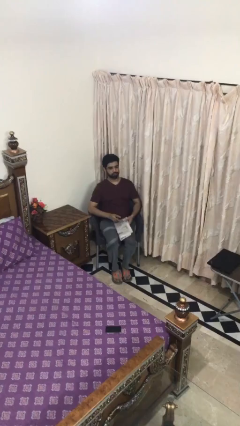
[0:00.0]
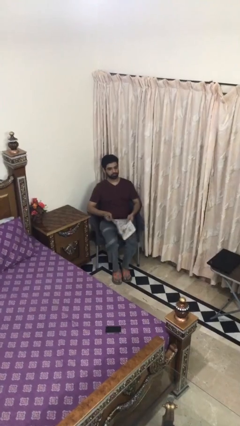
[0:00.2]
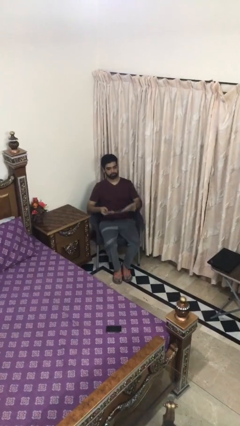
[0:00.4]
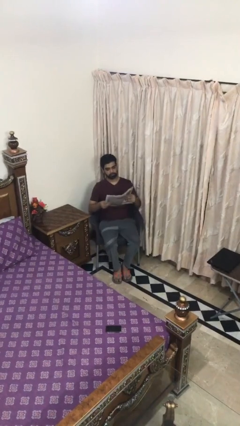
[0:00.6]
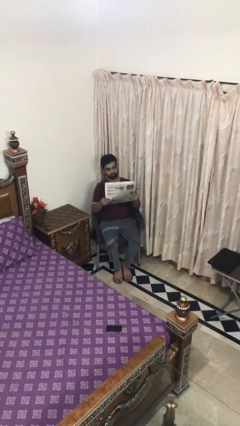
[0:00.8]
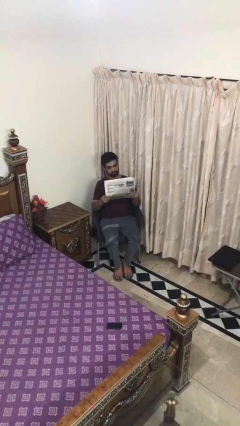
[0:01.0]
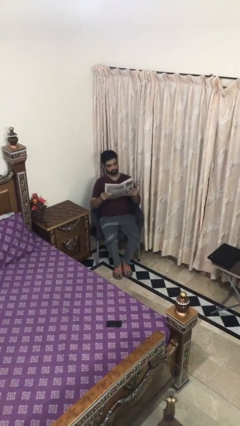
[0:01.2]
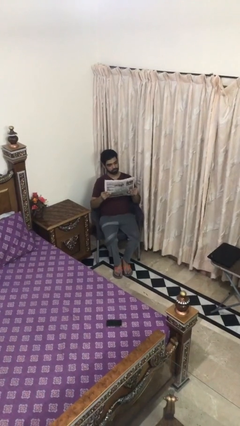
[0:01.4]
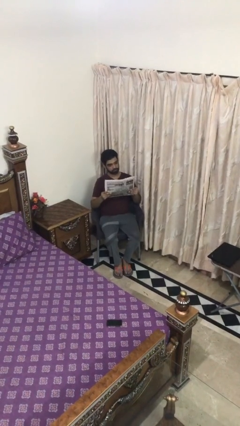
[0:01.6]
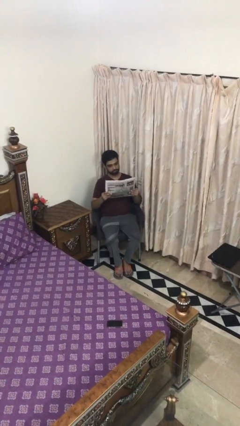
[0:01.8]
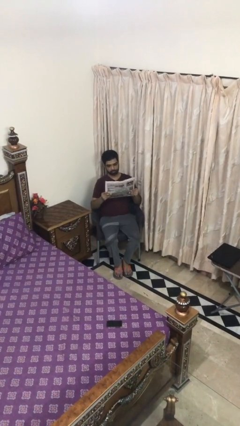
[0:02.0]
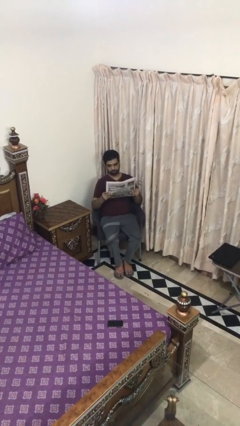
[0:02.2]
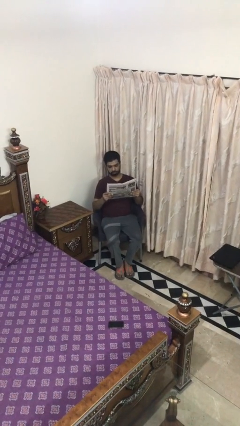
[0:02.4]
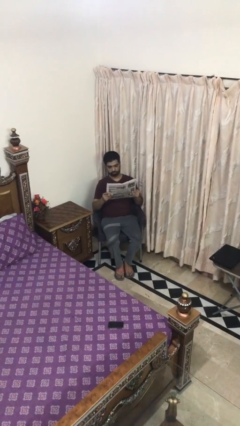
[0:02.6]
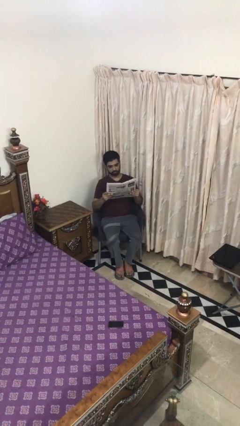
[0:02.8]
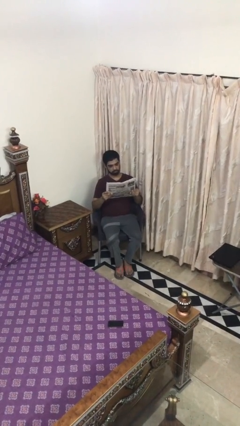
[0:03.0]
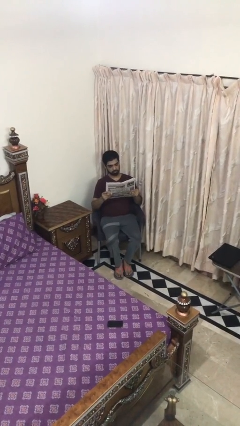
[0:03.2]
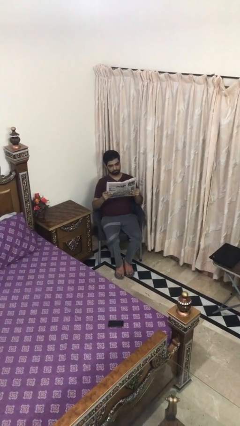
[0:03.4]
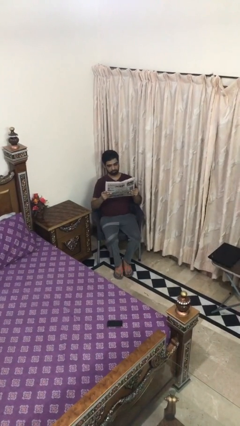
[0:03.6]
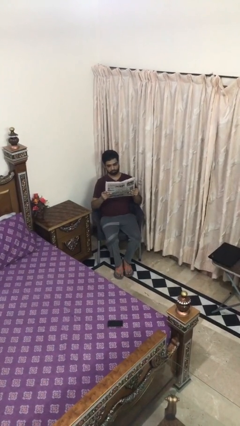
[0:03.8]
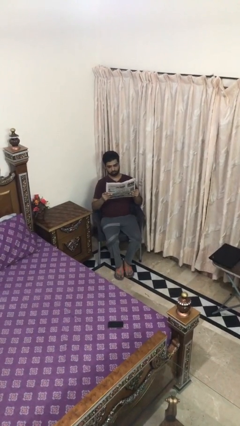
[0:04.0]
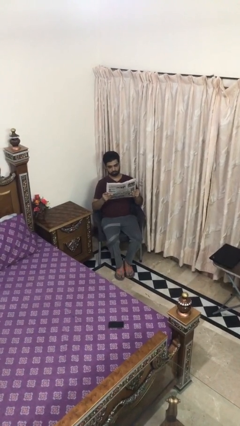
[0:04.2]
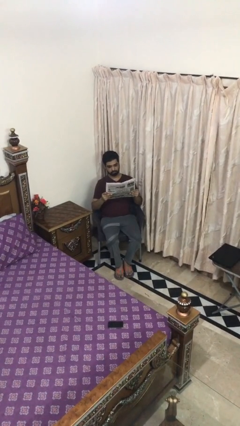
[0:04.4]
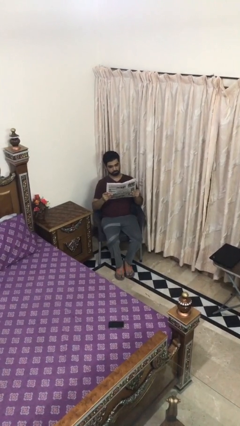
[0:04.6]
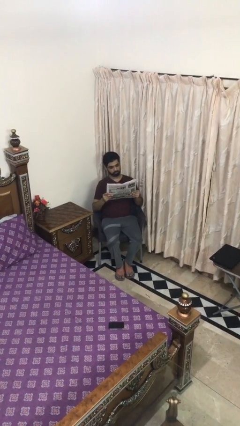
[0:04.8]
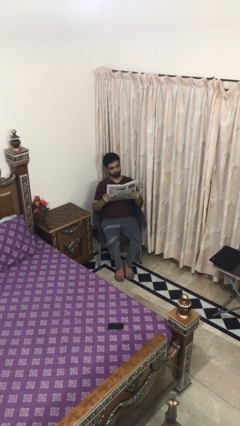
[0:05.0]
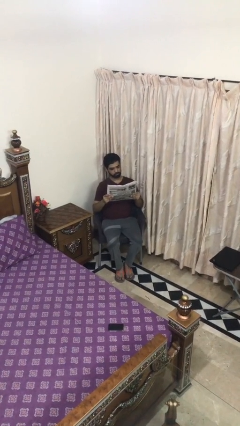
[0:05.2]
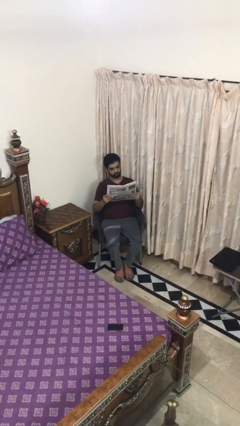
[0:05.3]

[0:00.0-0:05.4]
person reads document

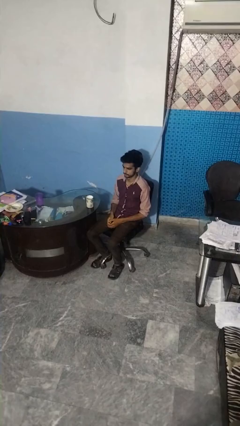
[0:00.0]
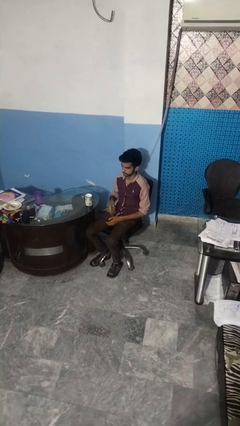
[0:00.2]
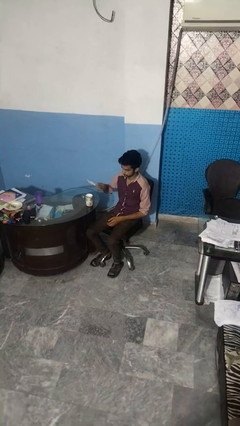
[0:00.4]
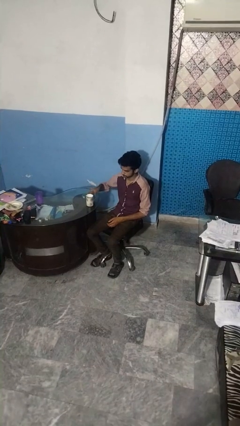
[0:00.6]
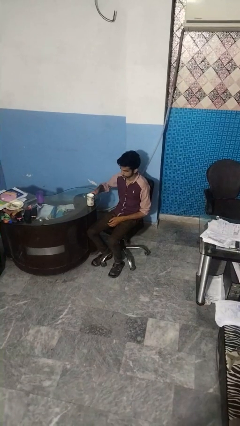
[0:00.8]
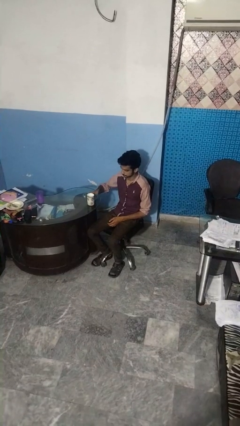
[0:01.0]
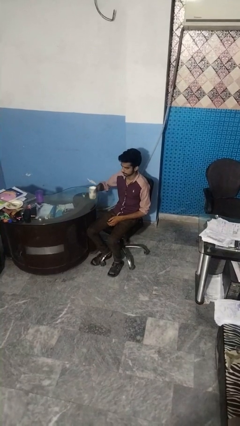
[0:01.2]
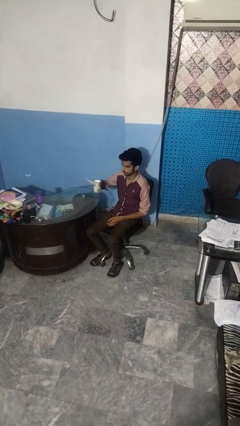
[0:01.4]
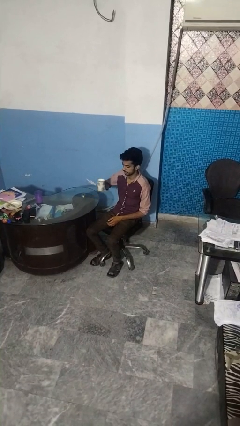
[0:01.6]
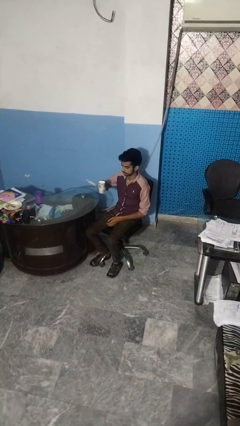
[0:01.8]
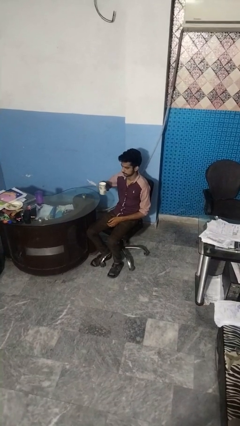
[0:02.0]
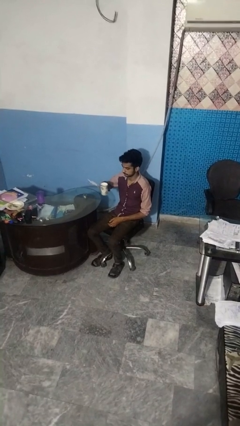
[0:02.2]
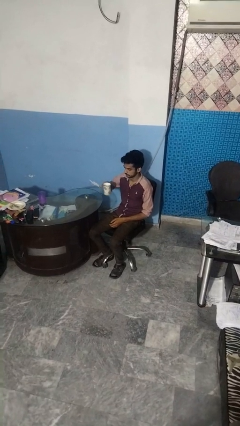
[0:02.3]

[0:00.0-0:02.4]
person picks up object from table

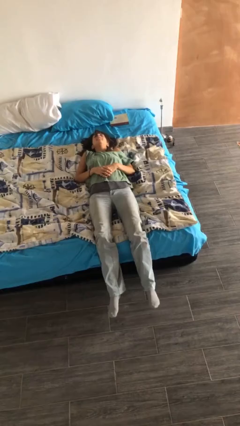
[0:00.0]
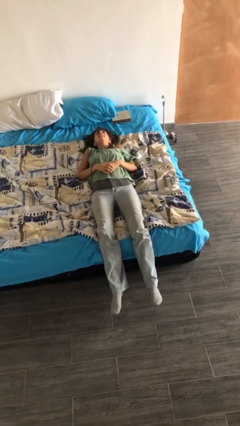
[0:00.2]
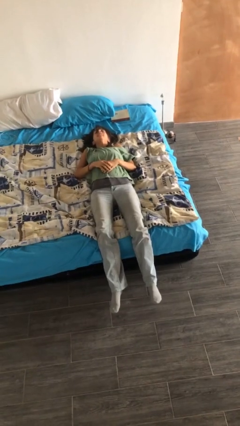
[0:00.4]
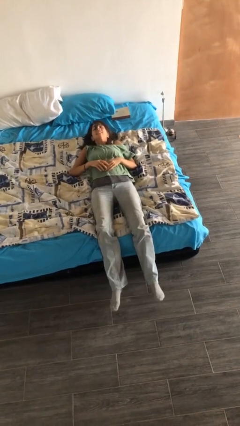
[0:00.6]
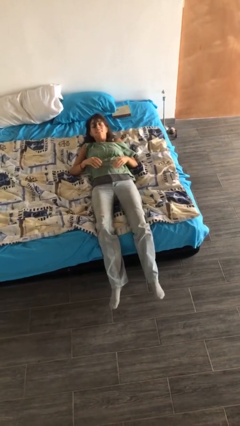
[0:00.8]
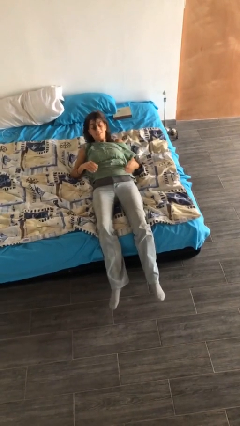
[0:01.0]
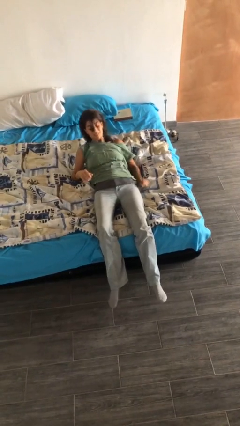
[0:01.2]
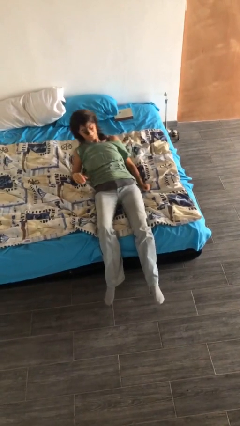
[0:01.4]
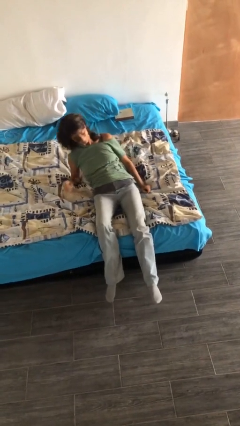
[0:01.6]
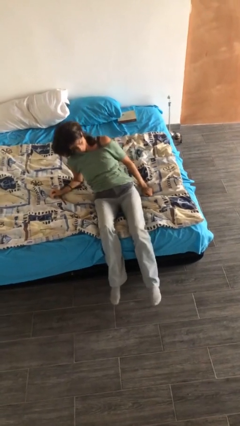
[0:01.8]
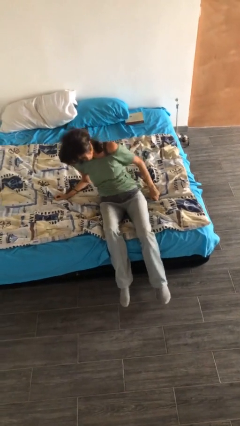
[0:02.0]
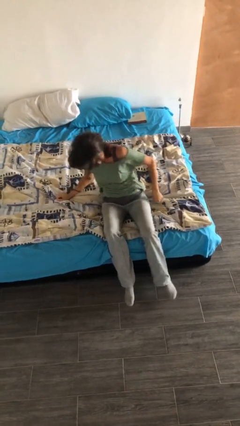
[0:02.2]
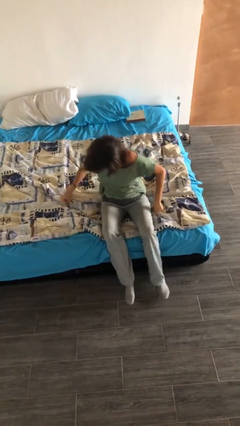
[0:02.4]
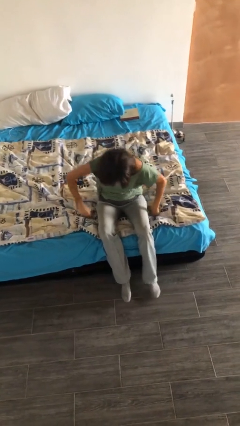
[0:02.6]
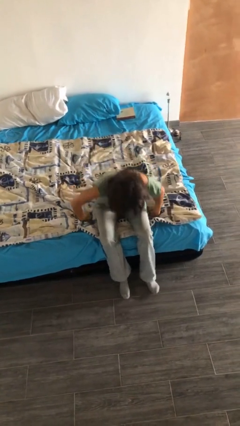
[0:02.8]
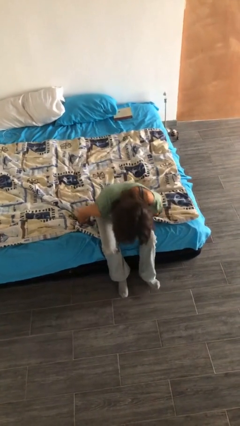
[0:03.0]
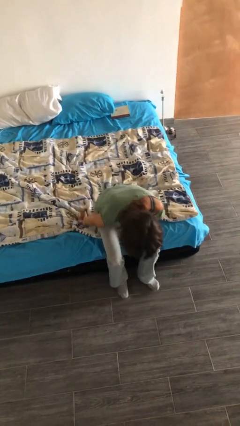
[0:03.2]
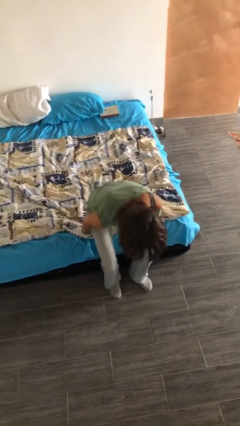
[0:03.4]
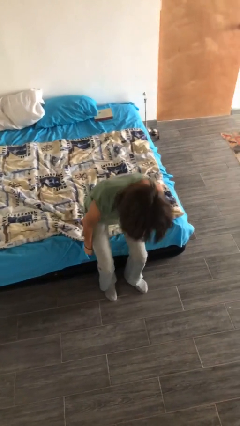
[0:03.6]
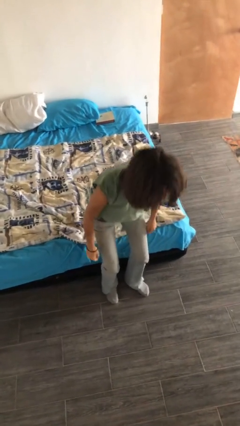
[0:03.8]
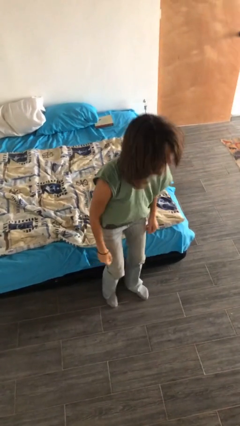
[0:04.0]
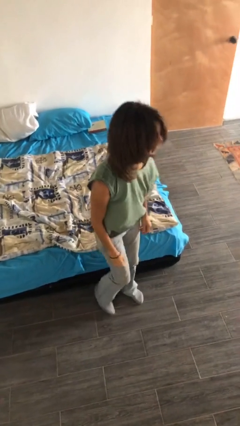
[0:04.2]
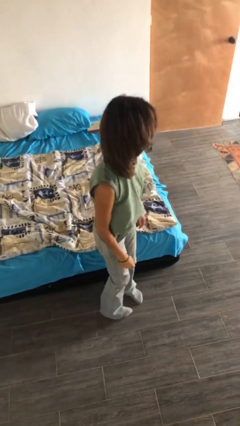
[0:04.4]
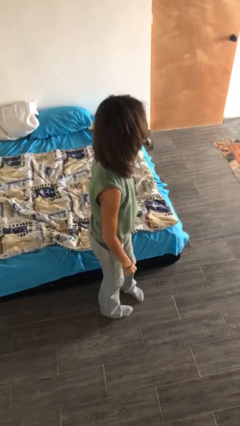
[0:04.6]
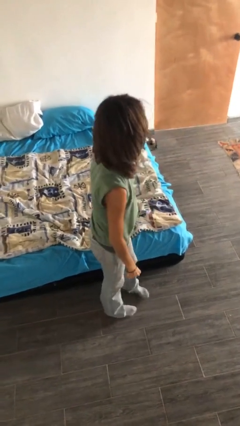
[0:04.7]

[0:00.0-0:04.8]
person stands up

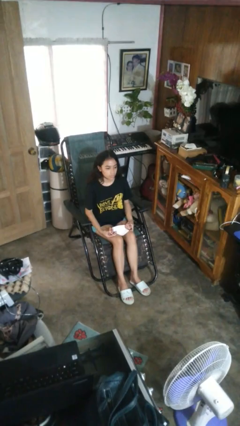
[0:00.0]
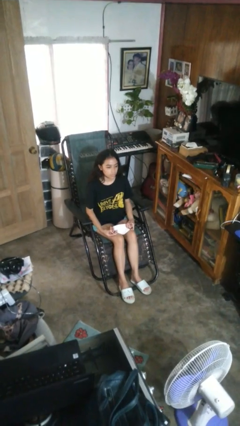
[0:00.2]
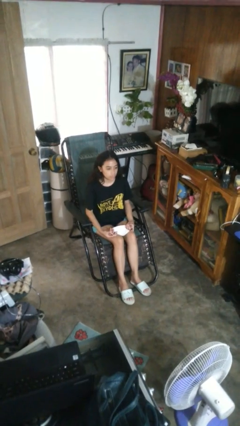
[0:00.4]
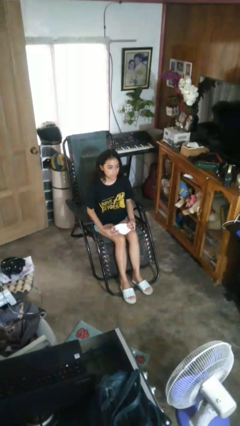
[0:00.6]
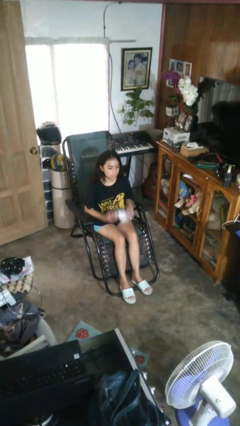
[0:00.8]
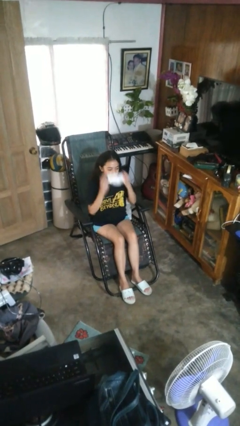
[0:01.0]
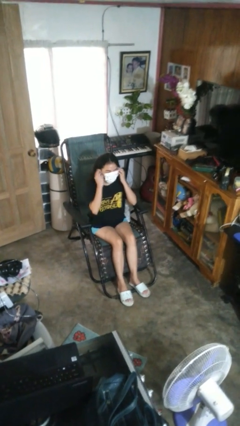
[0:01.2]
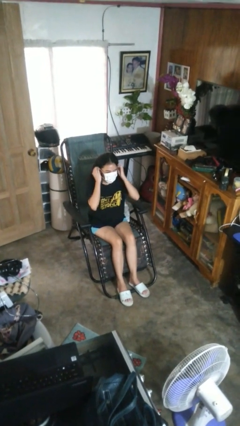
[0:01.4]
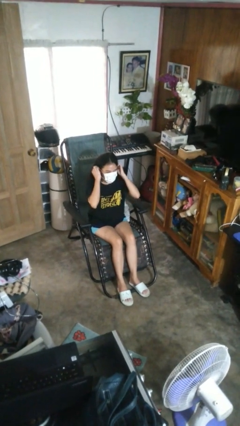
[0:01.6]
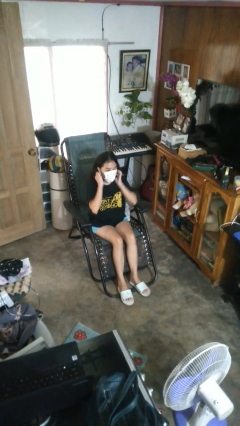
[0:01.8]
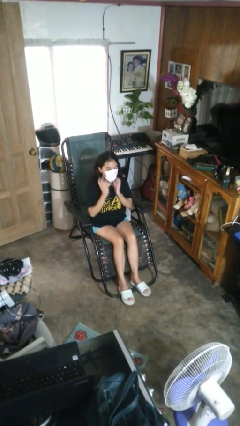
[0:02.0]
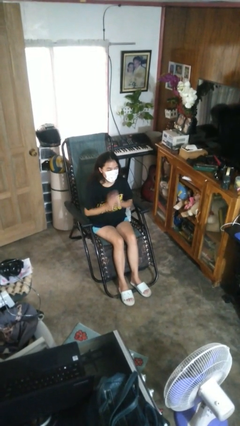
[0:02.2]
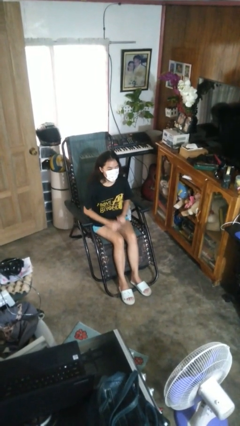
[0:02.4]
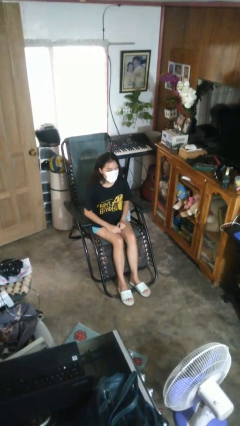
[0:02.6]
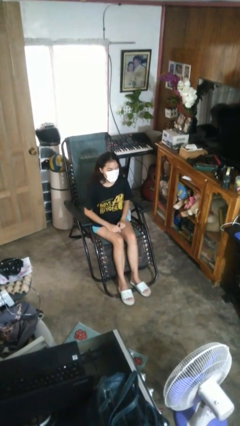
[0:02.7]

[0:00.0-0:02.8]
person puts on facemask

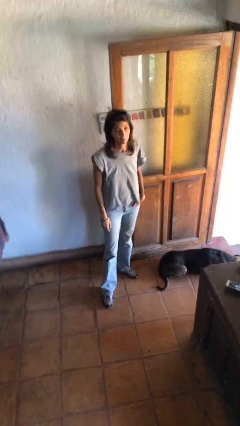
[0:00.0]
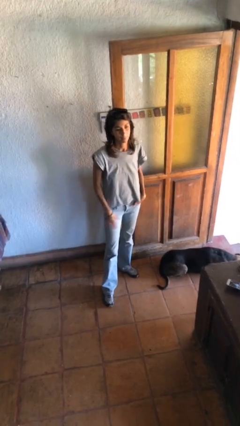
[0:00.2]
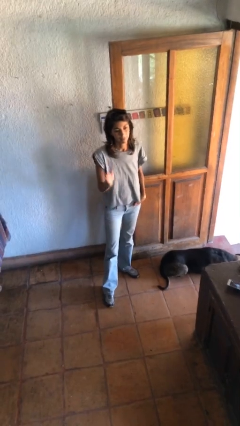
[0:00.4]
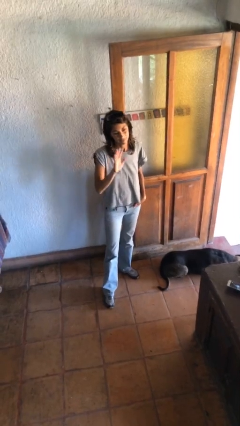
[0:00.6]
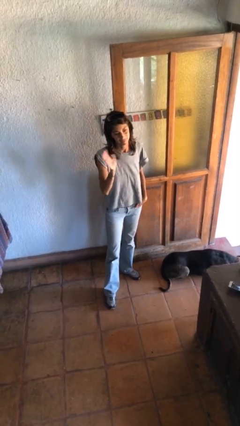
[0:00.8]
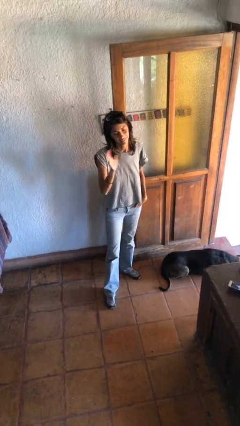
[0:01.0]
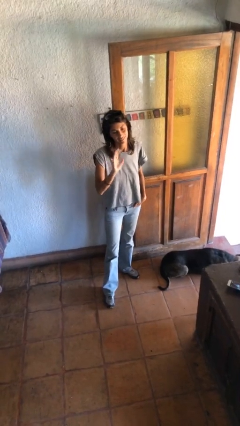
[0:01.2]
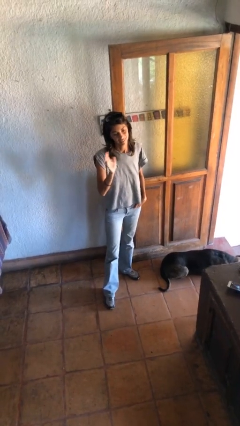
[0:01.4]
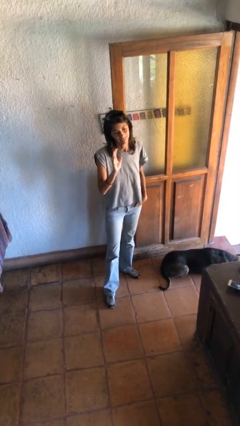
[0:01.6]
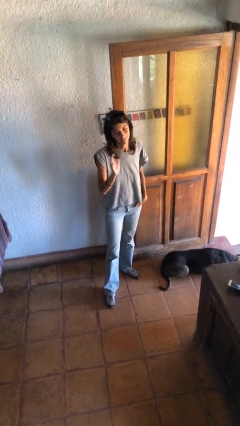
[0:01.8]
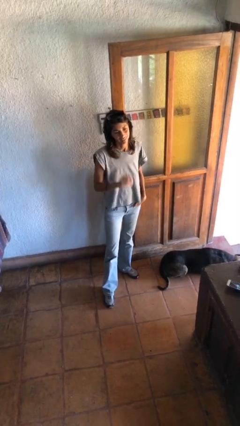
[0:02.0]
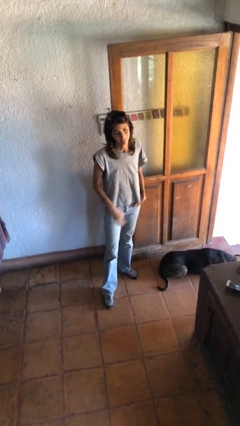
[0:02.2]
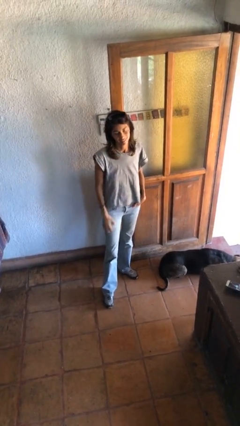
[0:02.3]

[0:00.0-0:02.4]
person waves at person

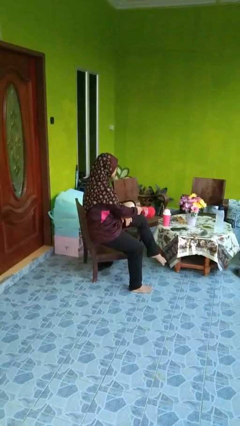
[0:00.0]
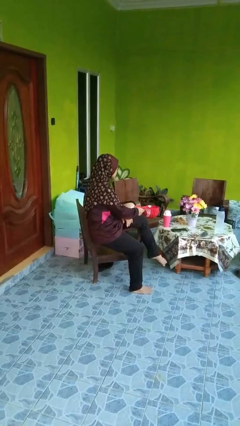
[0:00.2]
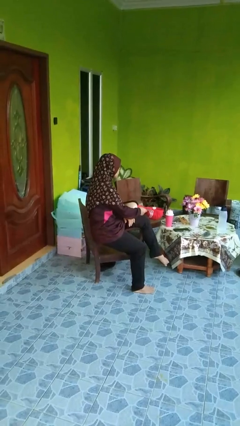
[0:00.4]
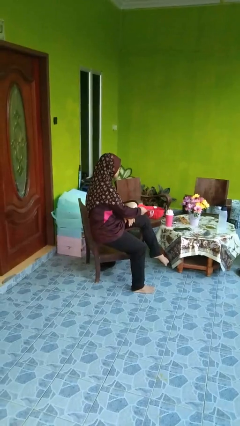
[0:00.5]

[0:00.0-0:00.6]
person takes off hat
